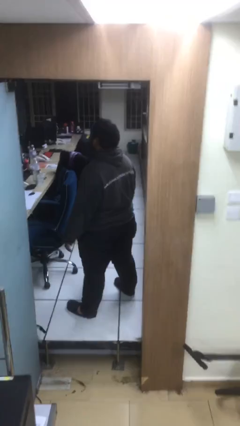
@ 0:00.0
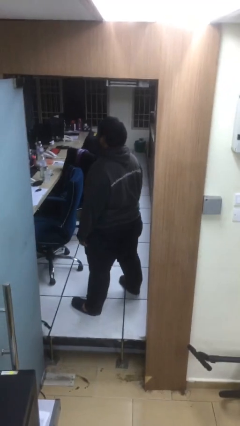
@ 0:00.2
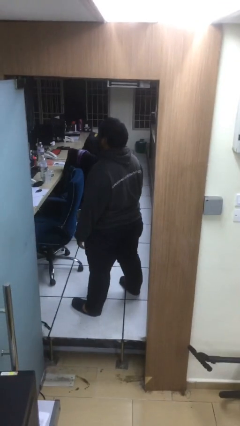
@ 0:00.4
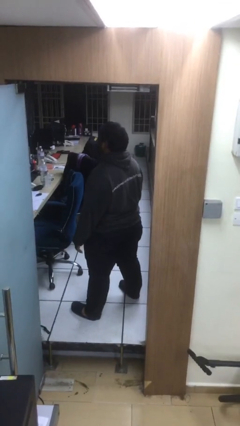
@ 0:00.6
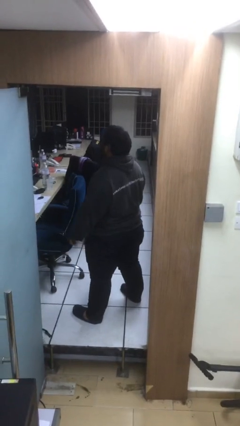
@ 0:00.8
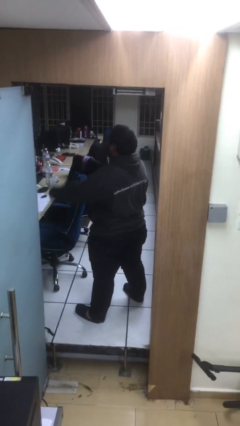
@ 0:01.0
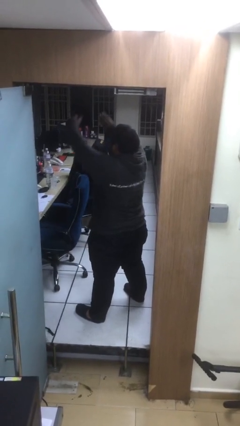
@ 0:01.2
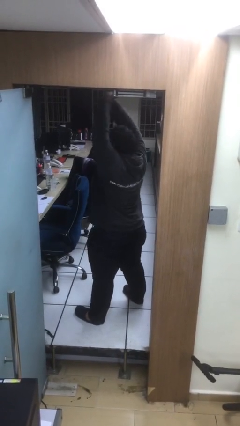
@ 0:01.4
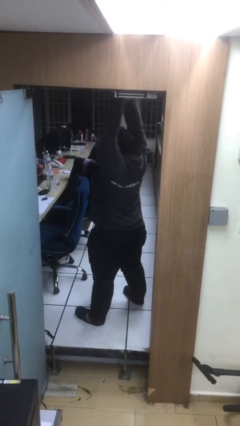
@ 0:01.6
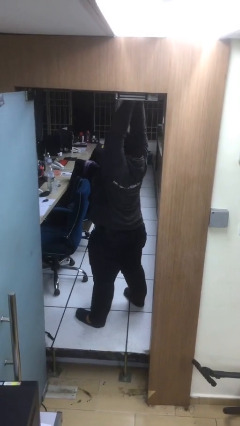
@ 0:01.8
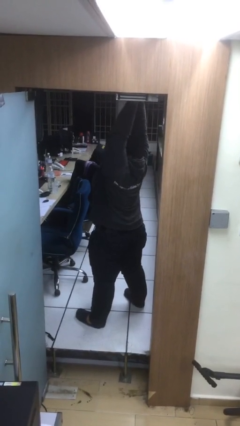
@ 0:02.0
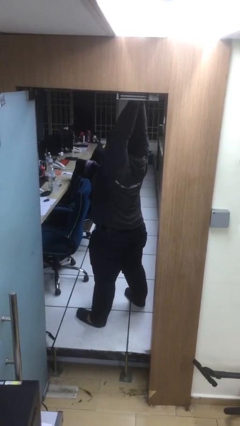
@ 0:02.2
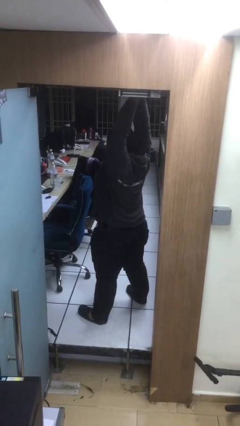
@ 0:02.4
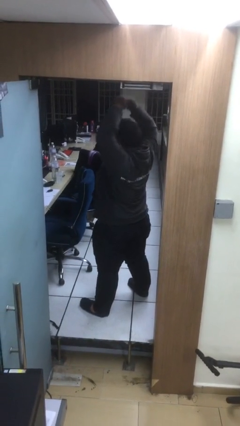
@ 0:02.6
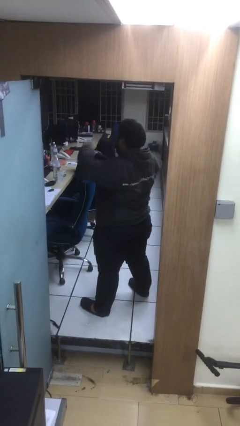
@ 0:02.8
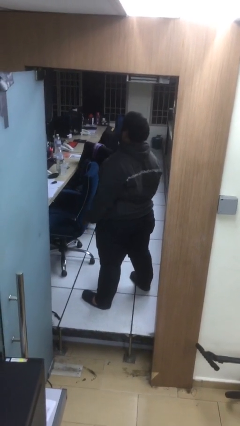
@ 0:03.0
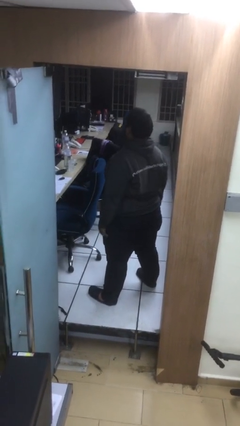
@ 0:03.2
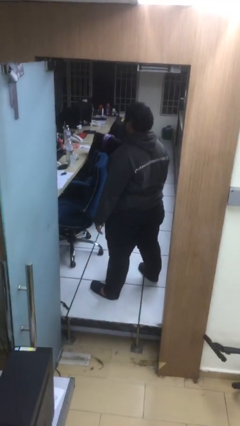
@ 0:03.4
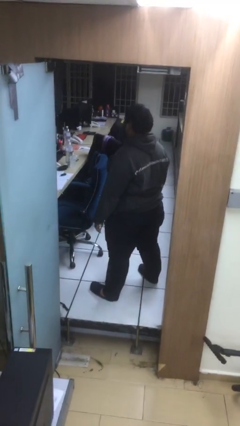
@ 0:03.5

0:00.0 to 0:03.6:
person stretches arms over head

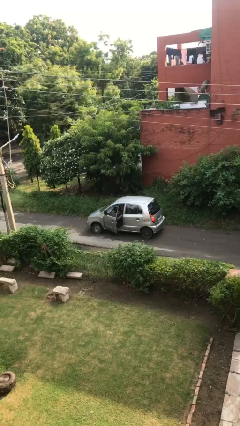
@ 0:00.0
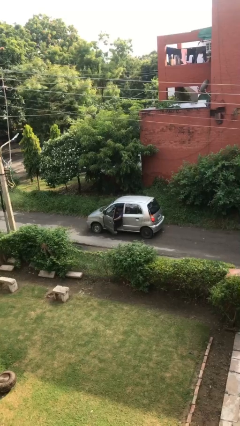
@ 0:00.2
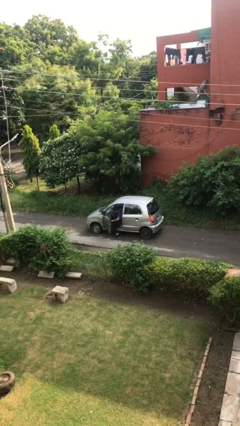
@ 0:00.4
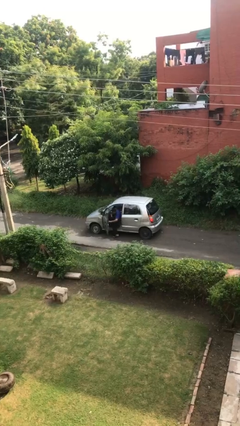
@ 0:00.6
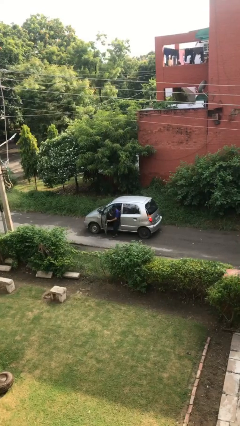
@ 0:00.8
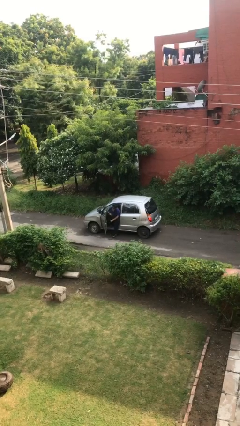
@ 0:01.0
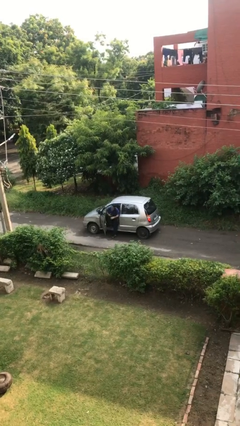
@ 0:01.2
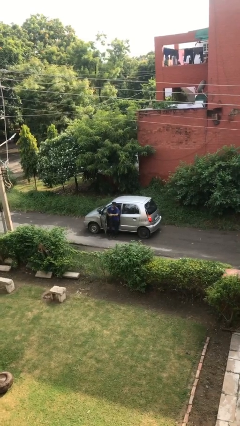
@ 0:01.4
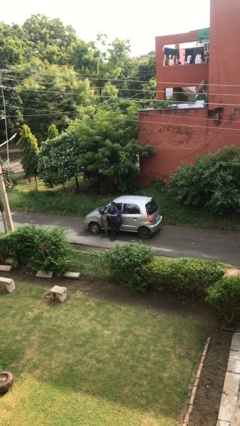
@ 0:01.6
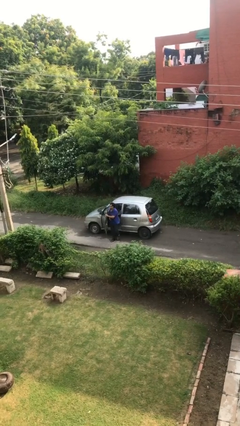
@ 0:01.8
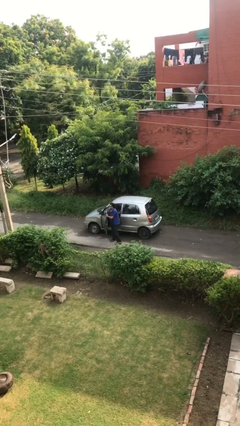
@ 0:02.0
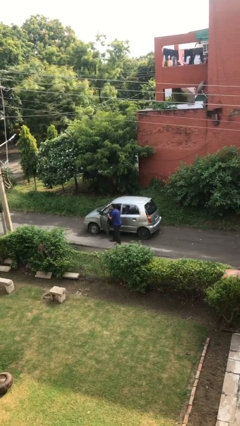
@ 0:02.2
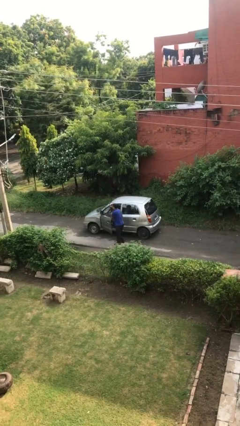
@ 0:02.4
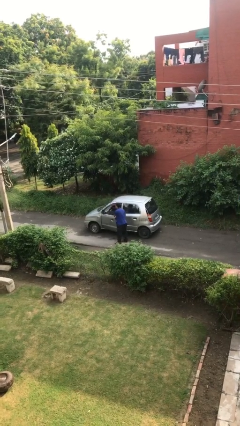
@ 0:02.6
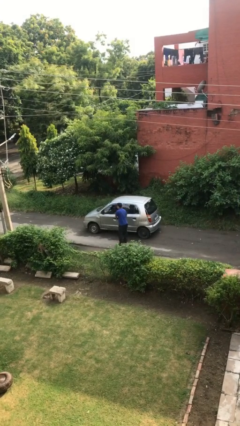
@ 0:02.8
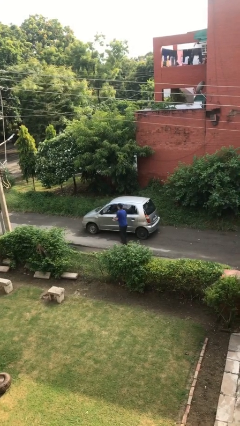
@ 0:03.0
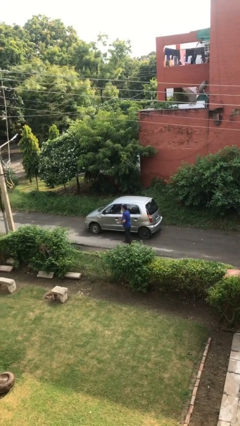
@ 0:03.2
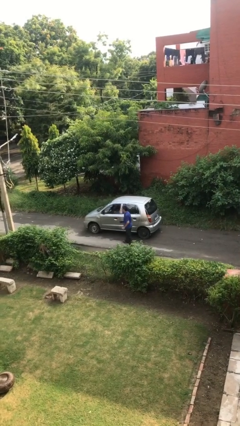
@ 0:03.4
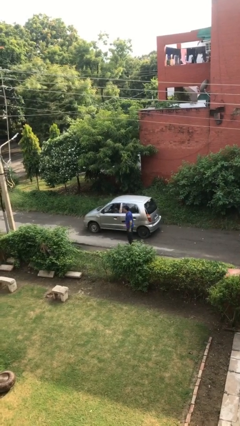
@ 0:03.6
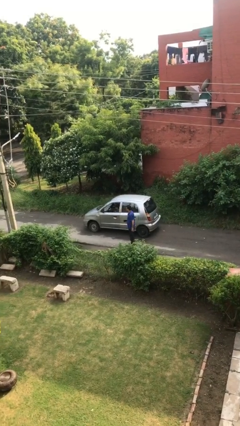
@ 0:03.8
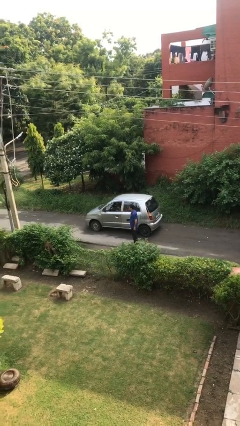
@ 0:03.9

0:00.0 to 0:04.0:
car drops off person

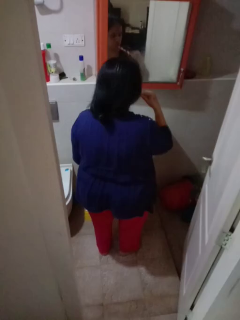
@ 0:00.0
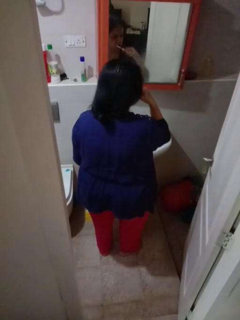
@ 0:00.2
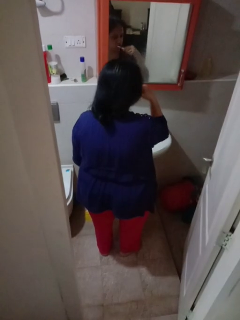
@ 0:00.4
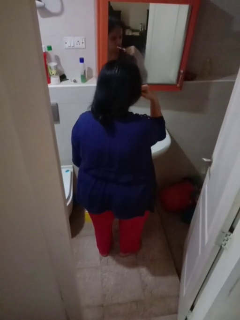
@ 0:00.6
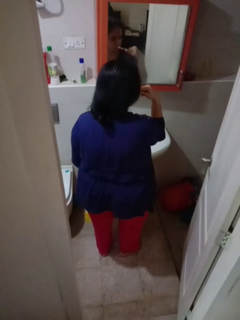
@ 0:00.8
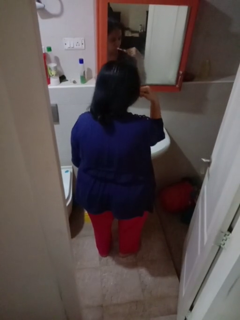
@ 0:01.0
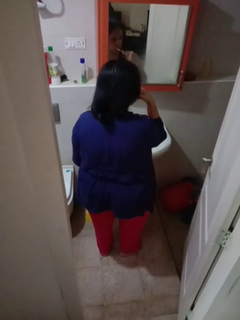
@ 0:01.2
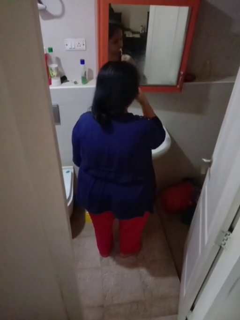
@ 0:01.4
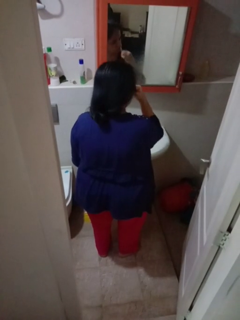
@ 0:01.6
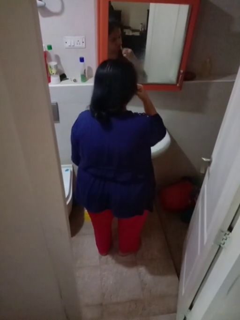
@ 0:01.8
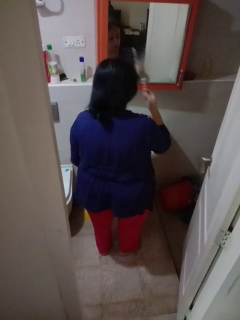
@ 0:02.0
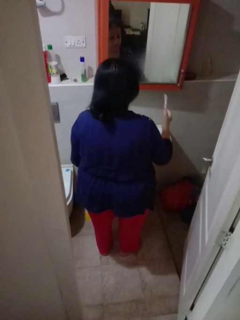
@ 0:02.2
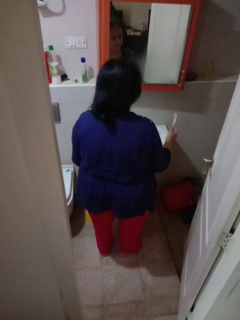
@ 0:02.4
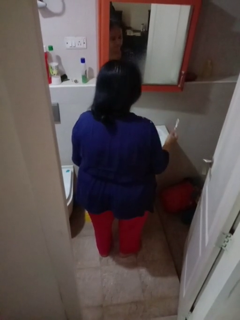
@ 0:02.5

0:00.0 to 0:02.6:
person brushes teeth

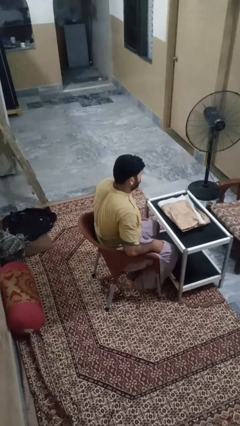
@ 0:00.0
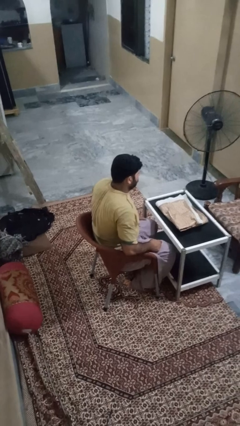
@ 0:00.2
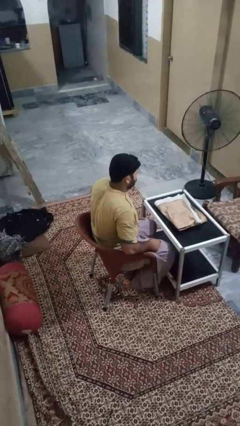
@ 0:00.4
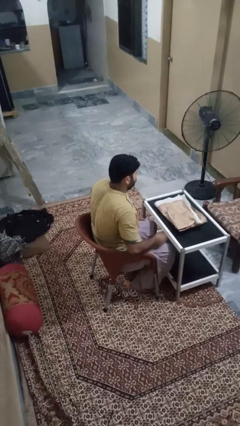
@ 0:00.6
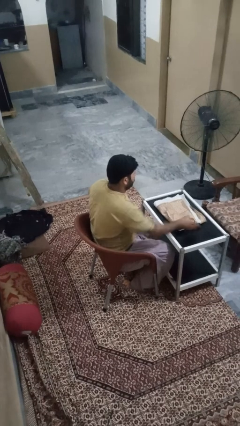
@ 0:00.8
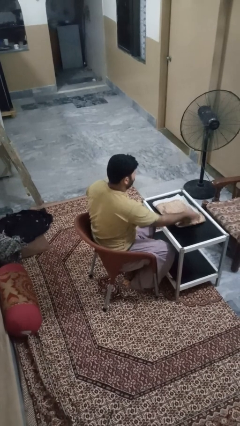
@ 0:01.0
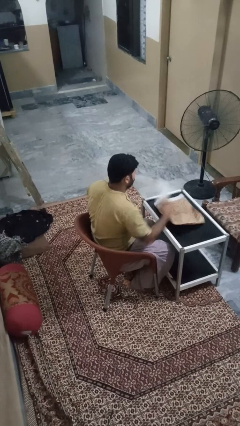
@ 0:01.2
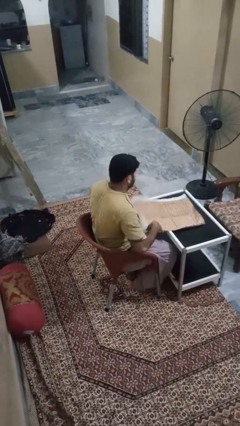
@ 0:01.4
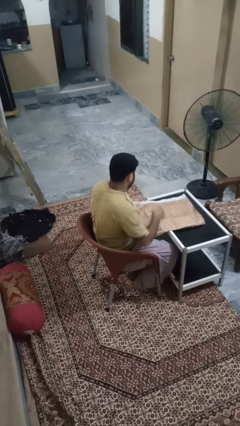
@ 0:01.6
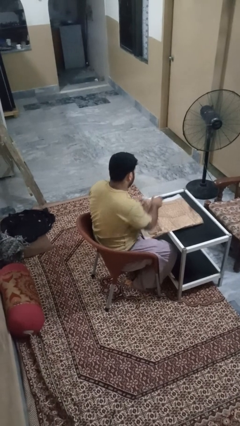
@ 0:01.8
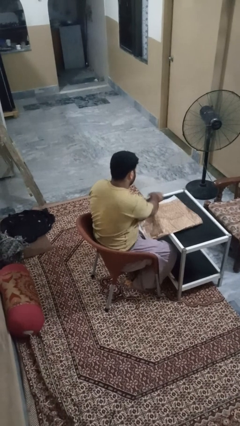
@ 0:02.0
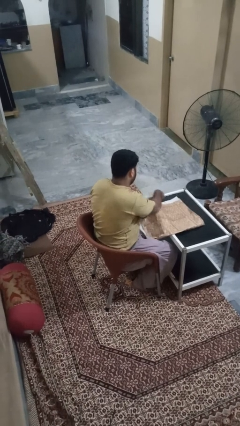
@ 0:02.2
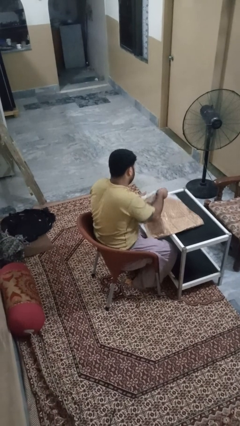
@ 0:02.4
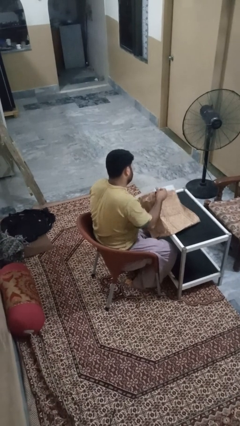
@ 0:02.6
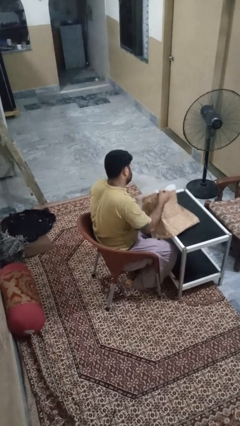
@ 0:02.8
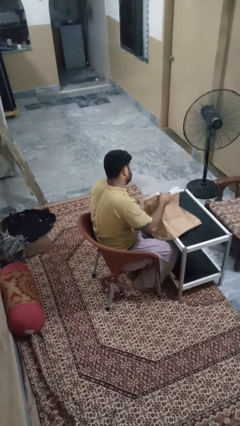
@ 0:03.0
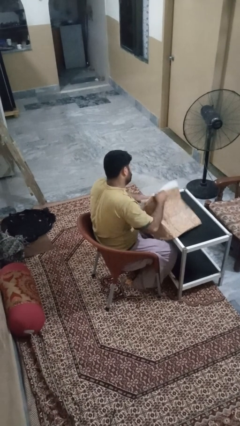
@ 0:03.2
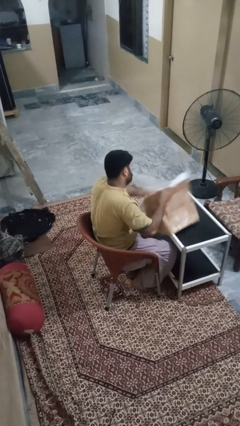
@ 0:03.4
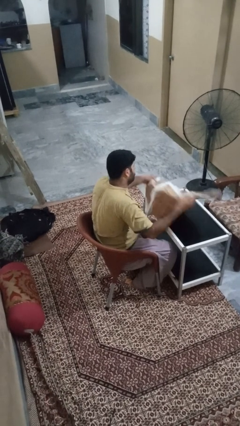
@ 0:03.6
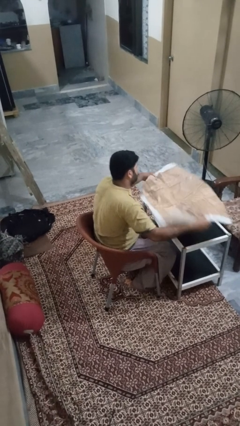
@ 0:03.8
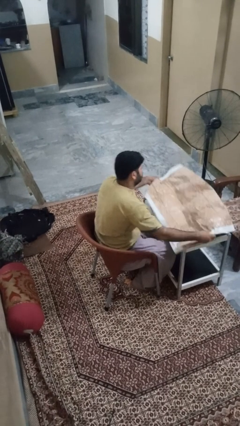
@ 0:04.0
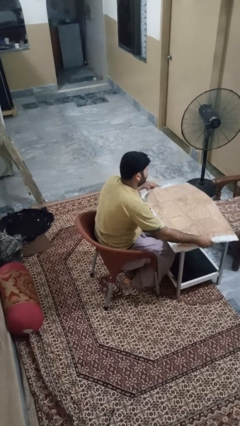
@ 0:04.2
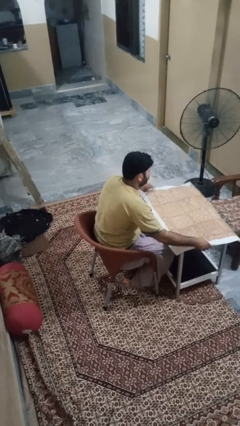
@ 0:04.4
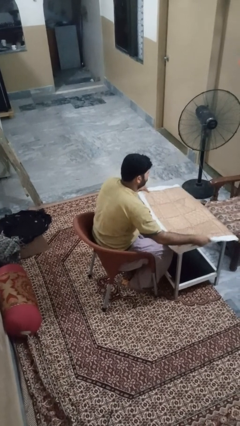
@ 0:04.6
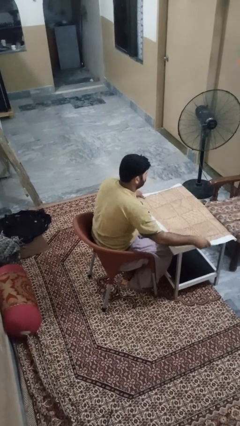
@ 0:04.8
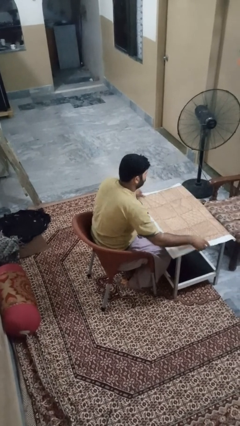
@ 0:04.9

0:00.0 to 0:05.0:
person spreads tablecloth

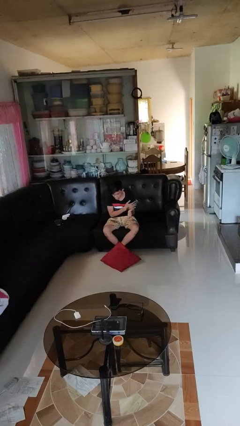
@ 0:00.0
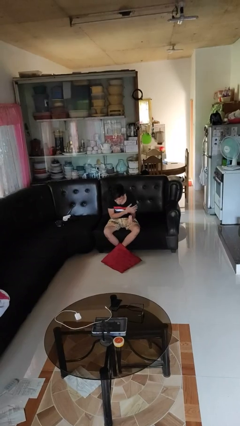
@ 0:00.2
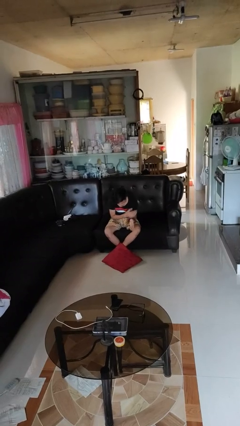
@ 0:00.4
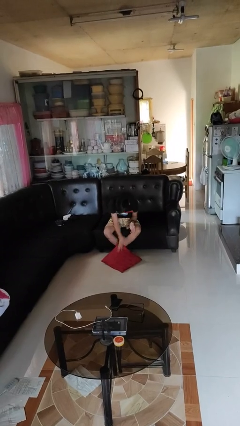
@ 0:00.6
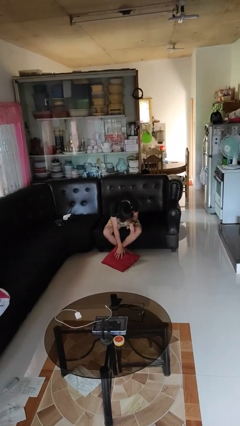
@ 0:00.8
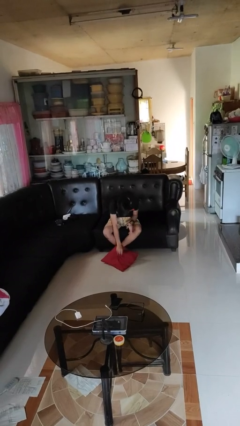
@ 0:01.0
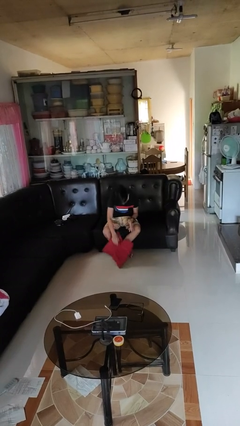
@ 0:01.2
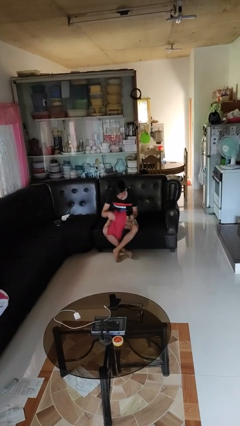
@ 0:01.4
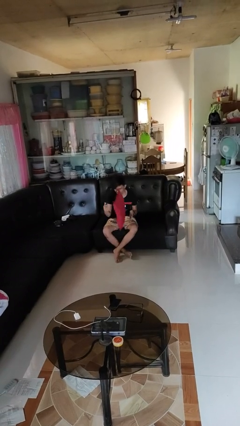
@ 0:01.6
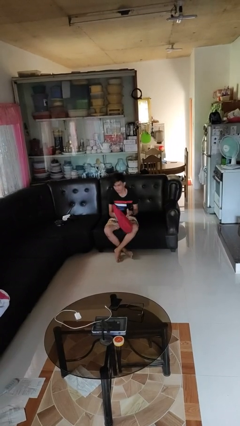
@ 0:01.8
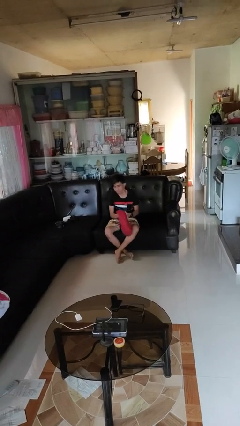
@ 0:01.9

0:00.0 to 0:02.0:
person picks up object from floor

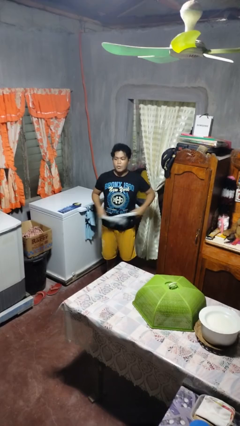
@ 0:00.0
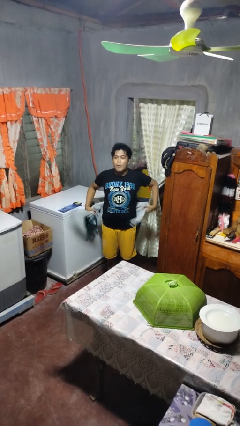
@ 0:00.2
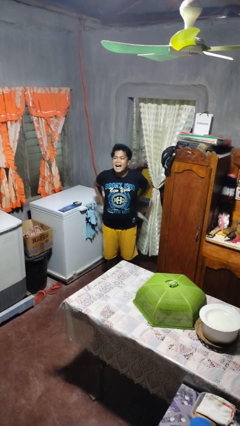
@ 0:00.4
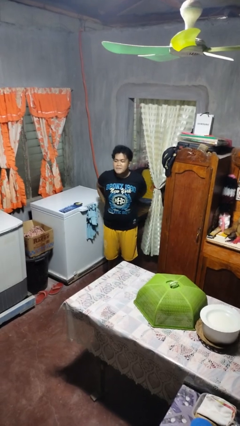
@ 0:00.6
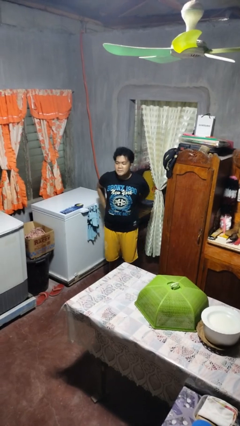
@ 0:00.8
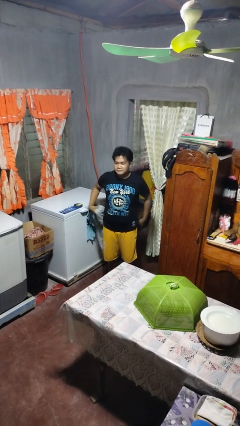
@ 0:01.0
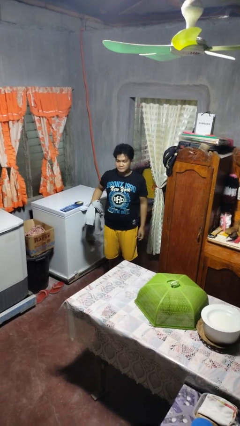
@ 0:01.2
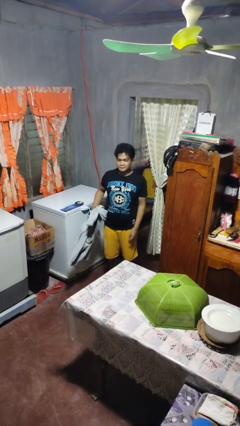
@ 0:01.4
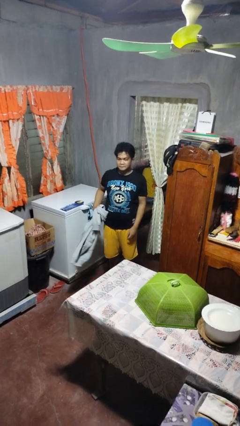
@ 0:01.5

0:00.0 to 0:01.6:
person unties jacket around waist
